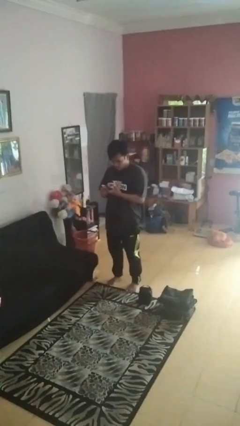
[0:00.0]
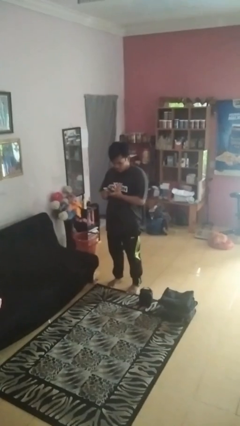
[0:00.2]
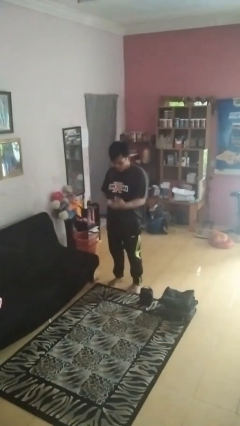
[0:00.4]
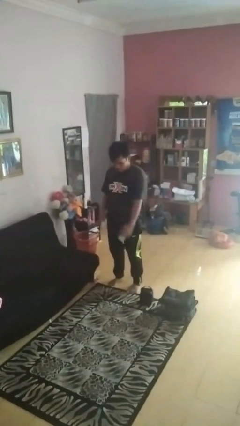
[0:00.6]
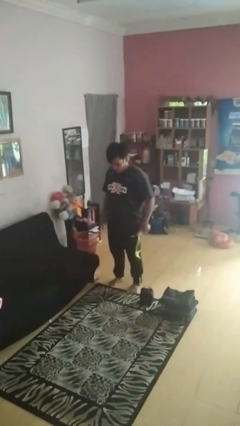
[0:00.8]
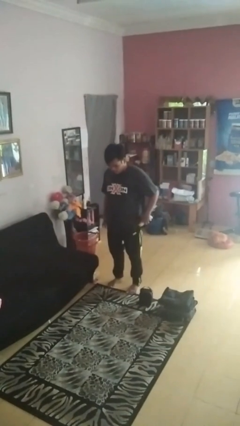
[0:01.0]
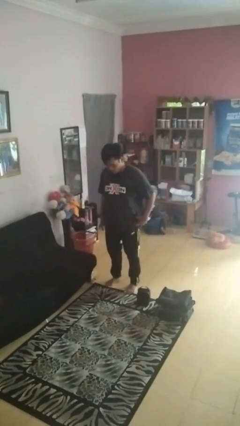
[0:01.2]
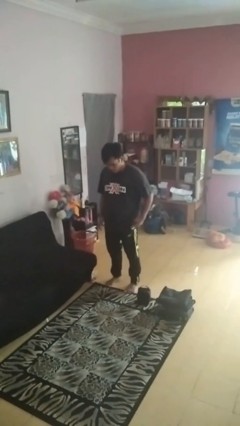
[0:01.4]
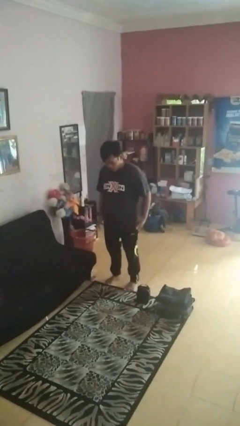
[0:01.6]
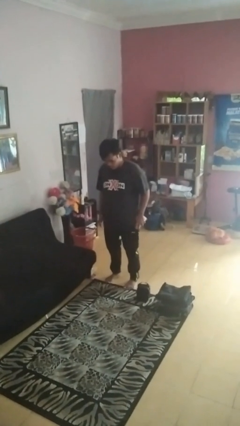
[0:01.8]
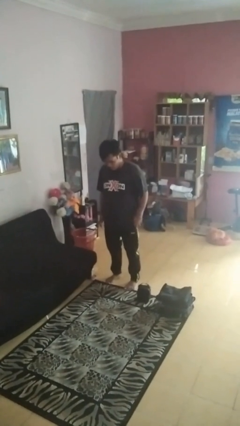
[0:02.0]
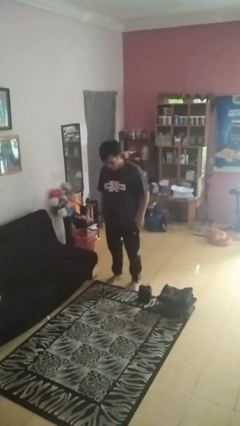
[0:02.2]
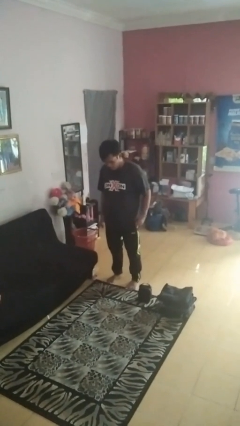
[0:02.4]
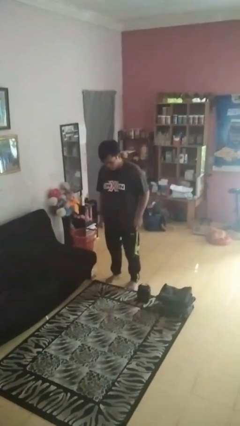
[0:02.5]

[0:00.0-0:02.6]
person puts phone into pocket

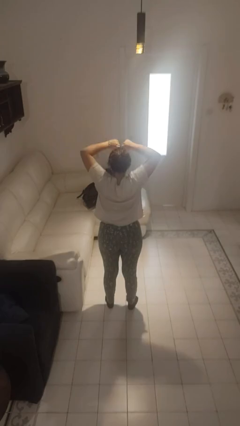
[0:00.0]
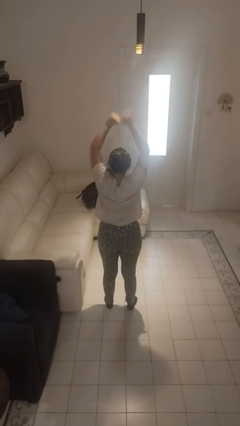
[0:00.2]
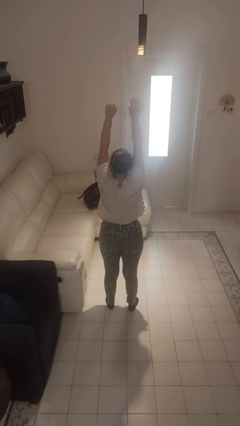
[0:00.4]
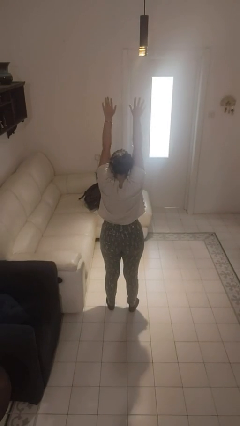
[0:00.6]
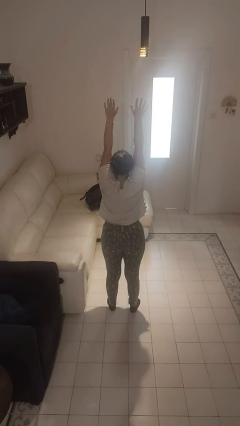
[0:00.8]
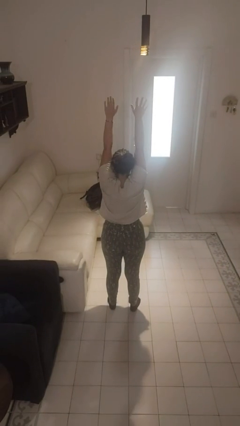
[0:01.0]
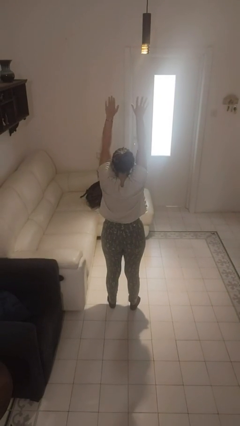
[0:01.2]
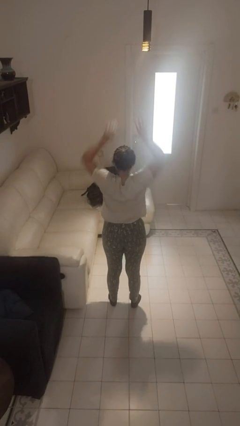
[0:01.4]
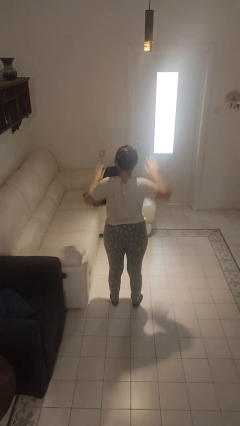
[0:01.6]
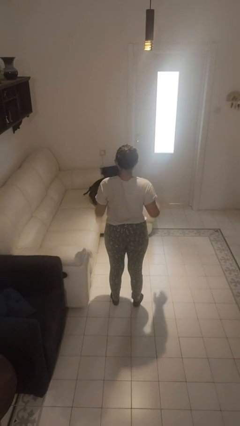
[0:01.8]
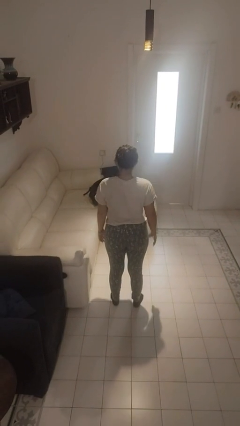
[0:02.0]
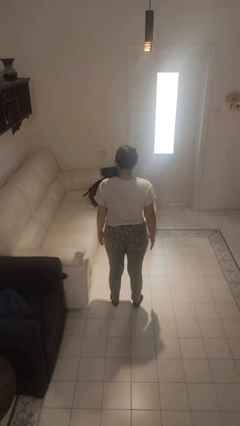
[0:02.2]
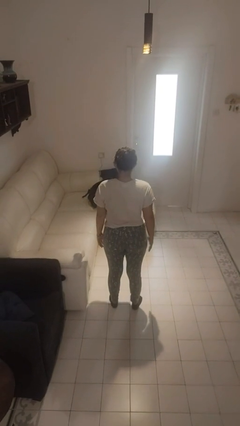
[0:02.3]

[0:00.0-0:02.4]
person stretches arms over head

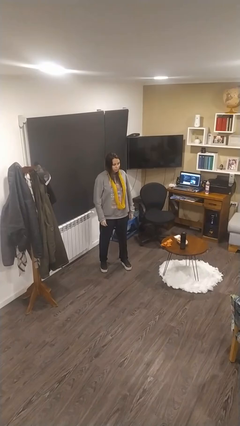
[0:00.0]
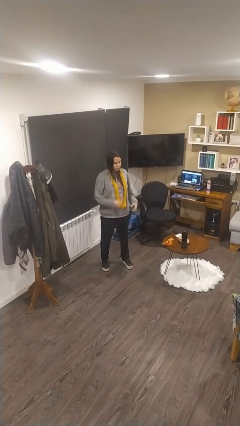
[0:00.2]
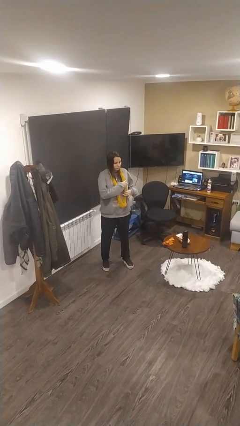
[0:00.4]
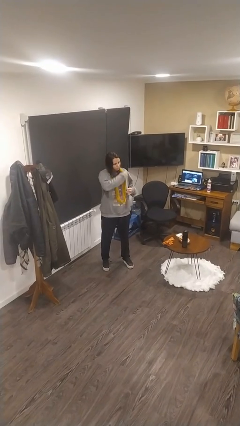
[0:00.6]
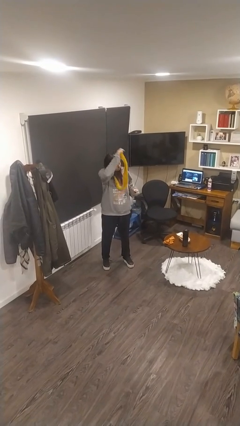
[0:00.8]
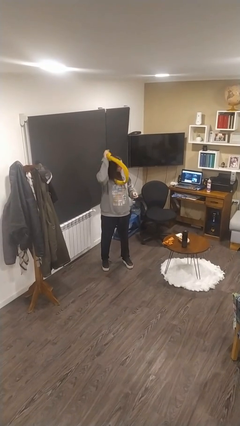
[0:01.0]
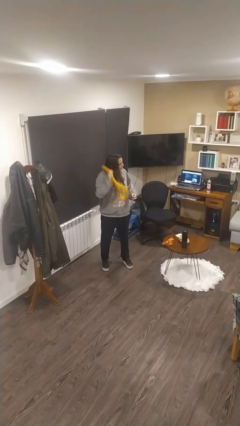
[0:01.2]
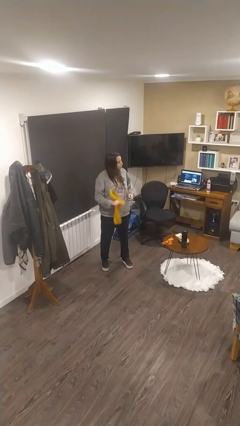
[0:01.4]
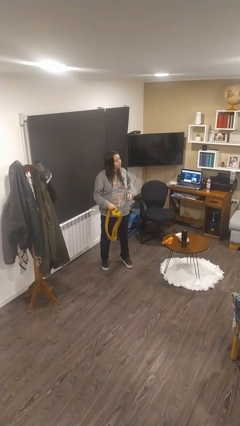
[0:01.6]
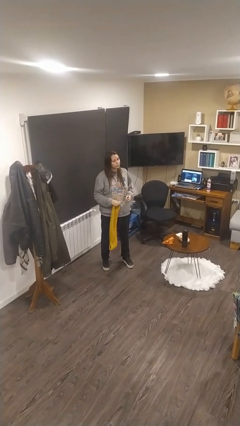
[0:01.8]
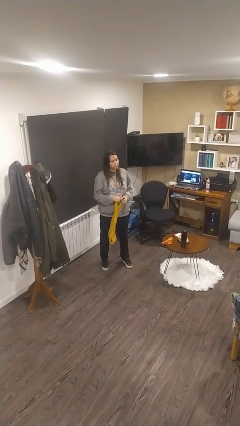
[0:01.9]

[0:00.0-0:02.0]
person takes off scarf

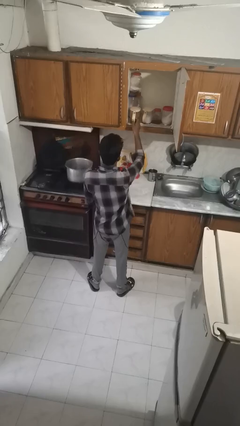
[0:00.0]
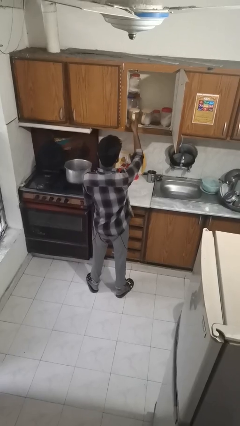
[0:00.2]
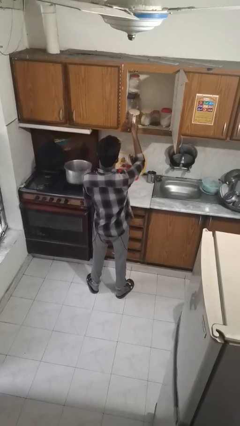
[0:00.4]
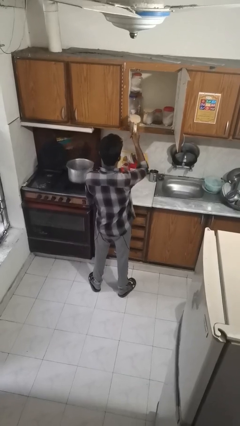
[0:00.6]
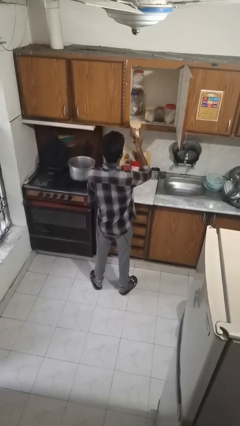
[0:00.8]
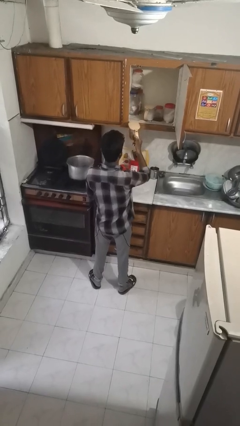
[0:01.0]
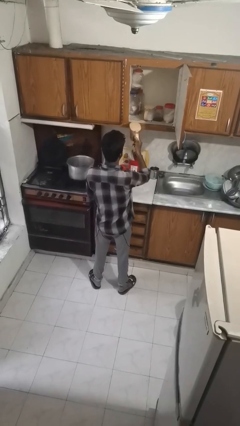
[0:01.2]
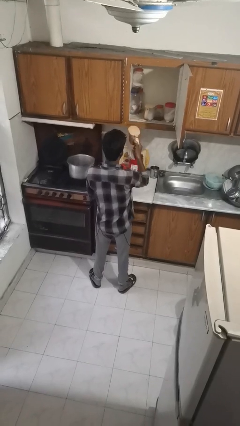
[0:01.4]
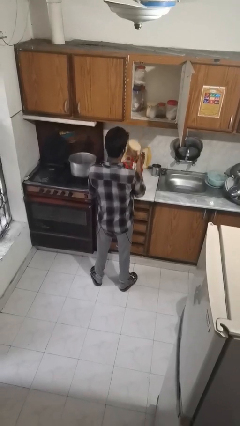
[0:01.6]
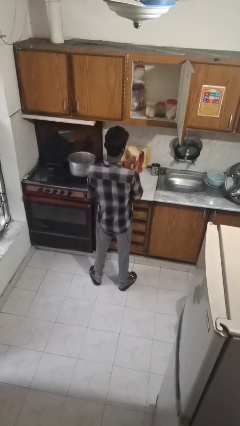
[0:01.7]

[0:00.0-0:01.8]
person picks up object from cabinet

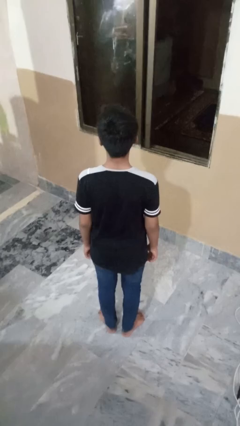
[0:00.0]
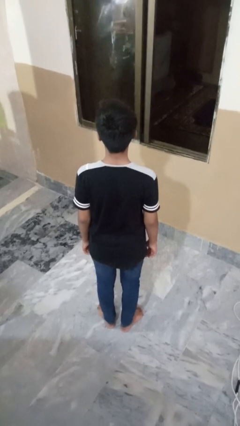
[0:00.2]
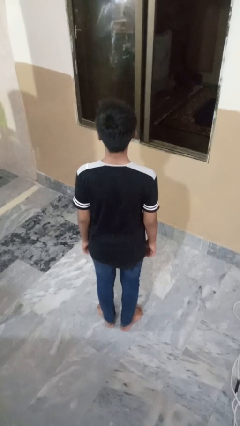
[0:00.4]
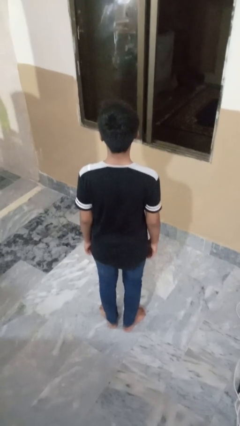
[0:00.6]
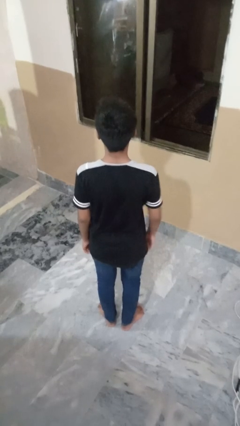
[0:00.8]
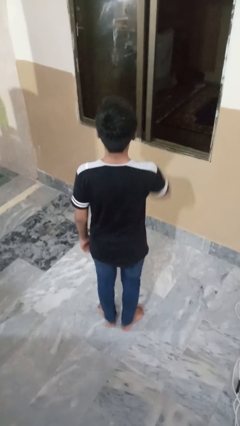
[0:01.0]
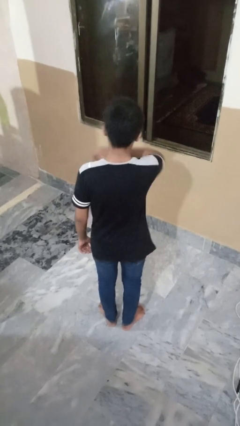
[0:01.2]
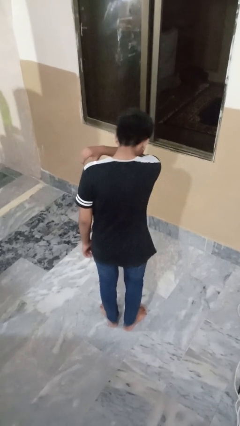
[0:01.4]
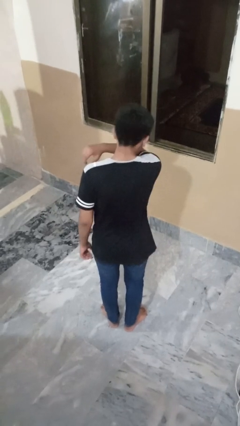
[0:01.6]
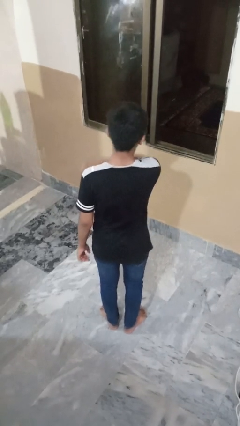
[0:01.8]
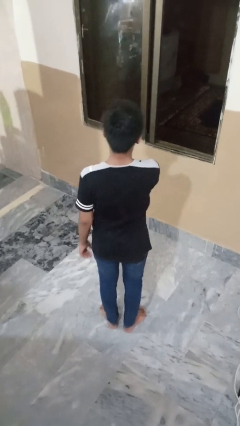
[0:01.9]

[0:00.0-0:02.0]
person sneezes into arm

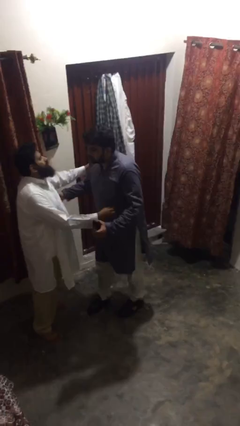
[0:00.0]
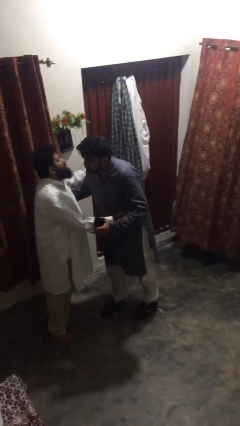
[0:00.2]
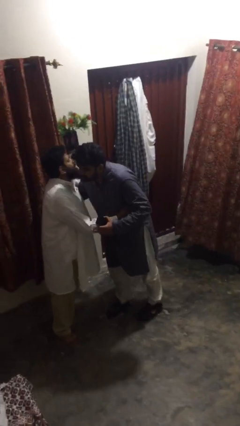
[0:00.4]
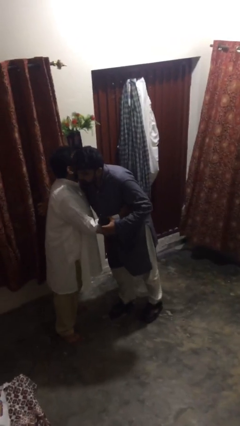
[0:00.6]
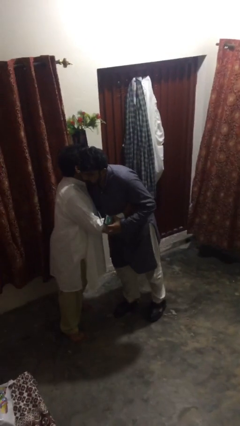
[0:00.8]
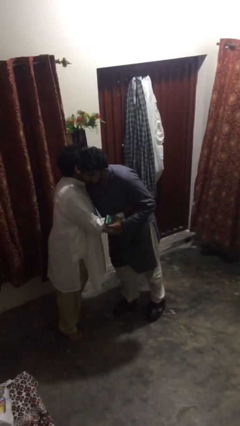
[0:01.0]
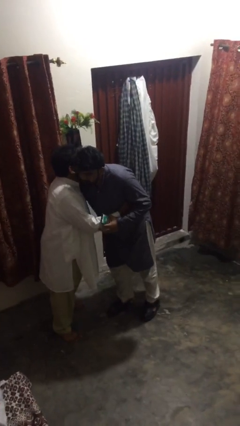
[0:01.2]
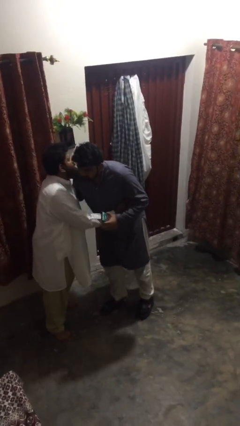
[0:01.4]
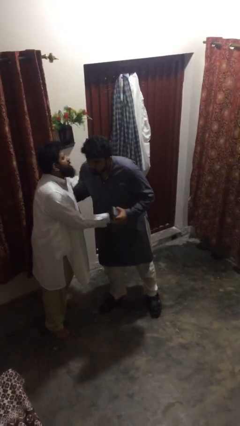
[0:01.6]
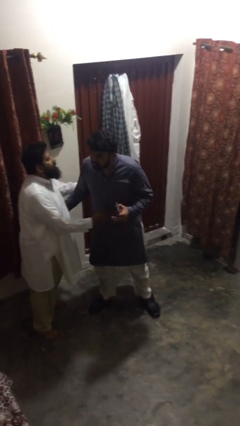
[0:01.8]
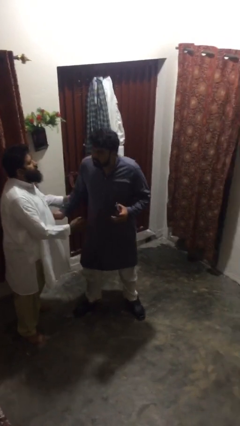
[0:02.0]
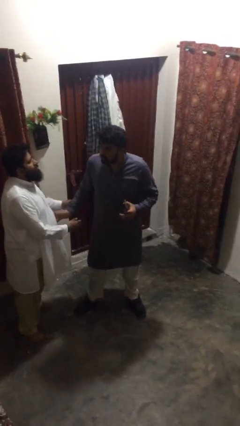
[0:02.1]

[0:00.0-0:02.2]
person embraces person

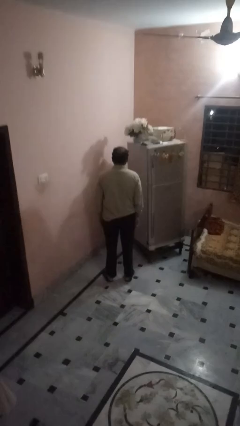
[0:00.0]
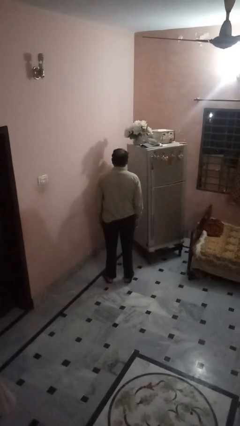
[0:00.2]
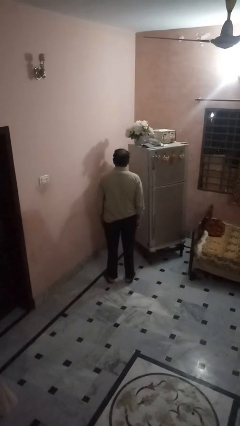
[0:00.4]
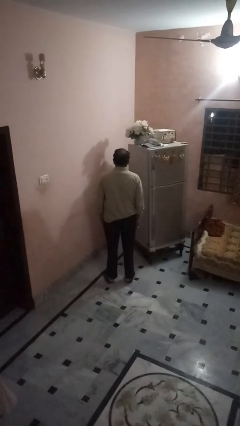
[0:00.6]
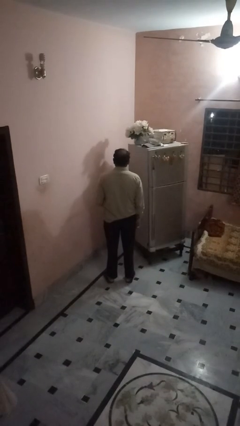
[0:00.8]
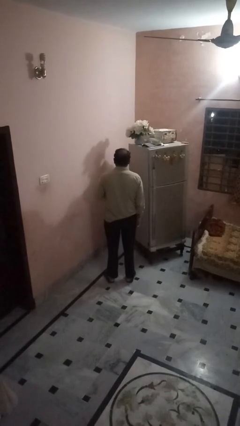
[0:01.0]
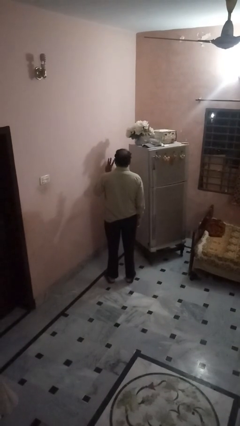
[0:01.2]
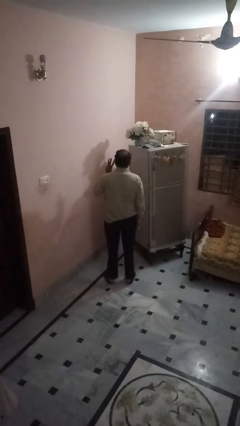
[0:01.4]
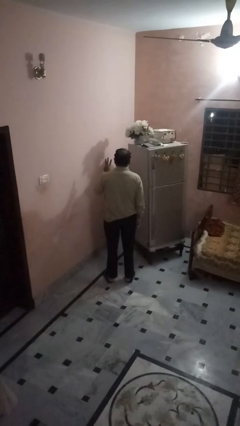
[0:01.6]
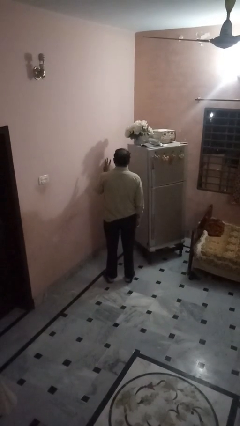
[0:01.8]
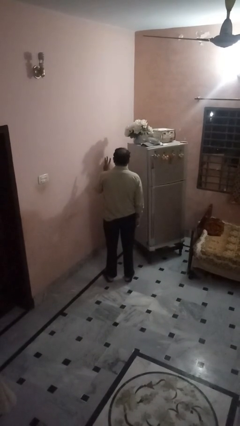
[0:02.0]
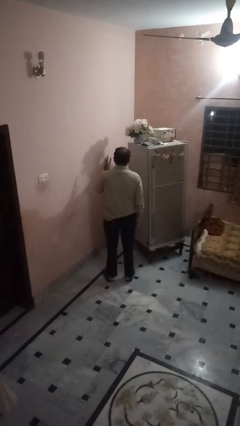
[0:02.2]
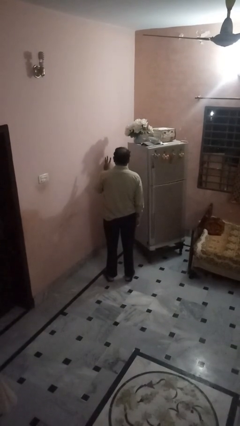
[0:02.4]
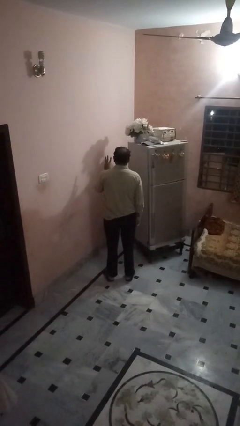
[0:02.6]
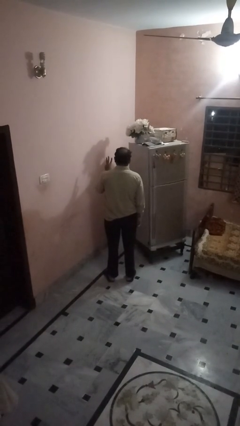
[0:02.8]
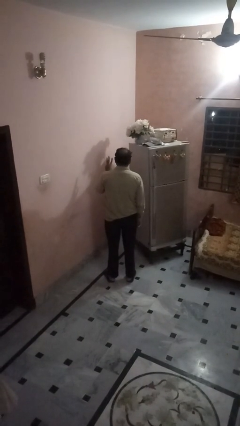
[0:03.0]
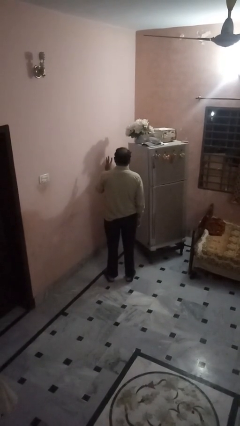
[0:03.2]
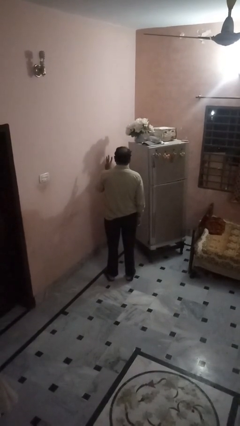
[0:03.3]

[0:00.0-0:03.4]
person gestures number three

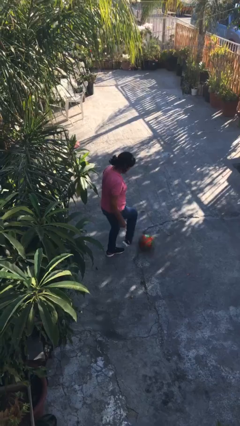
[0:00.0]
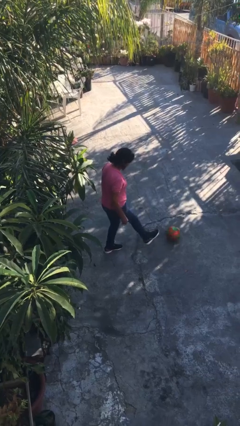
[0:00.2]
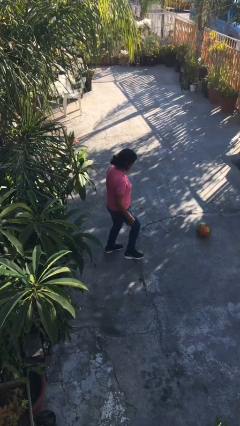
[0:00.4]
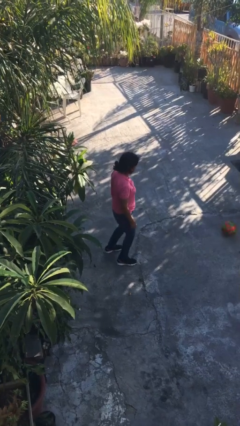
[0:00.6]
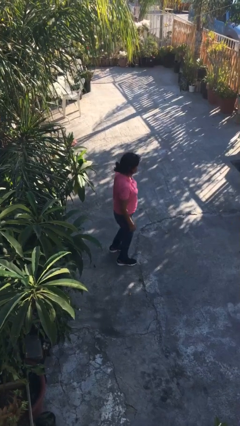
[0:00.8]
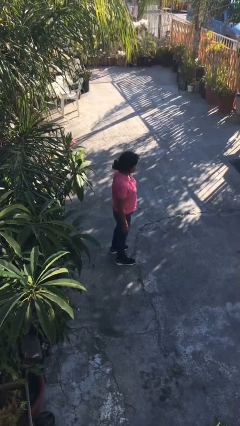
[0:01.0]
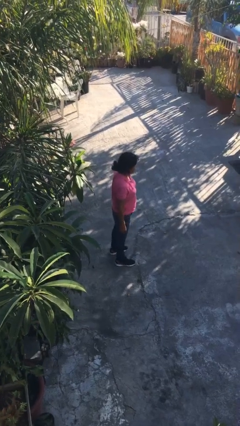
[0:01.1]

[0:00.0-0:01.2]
person kicks object to person
